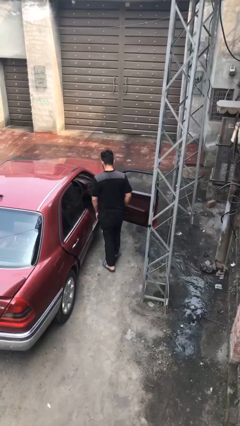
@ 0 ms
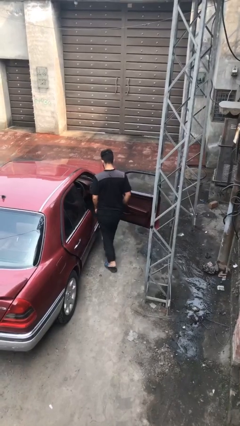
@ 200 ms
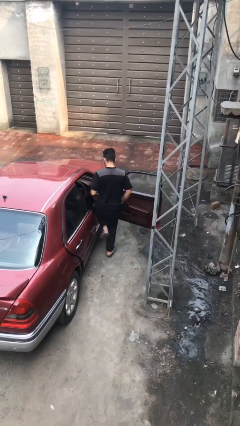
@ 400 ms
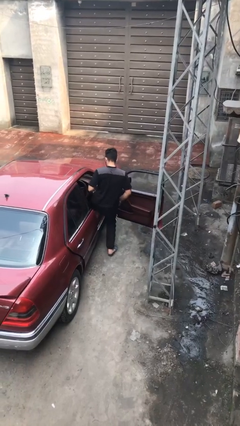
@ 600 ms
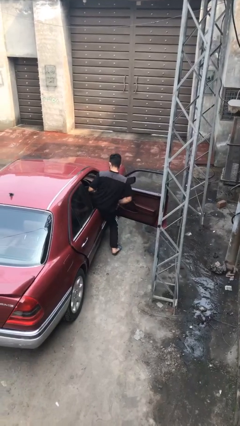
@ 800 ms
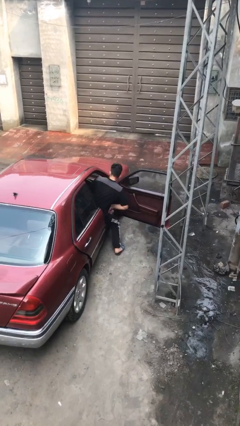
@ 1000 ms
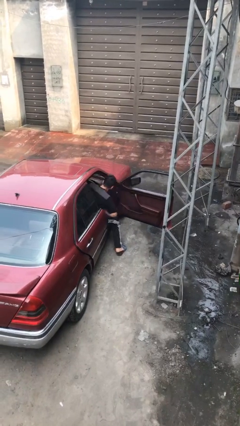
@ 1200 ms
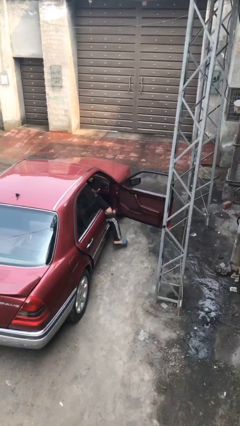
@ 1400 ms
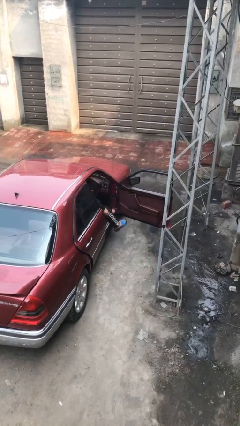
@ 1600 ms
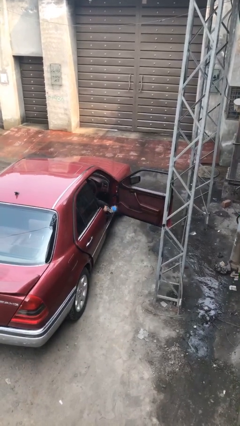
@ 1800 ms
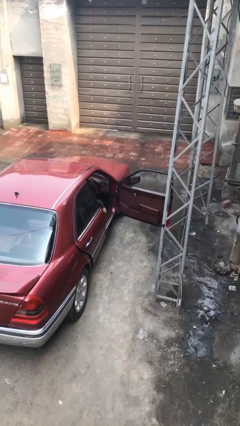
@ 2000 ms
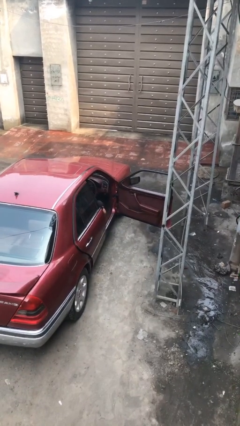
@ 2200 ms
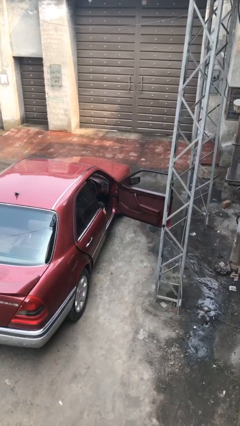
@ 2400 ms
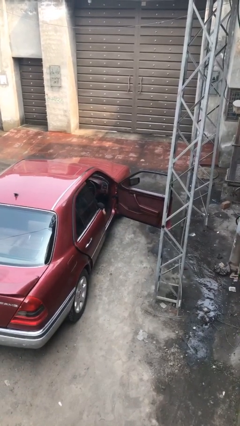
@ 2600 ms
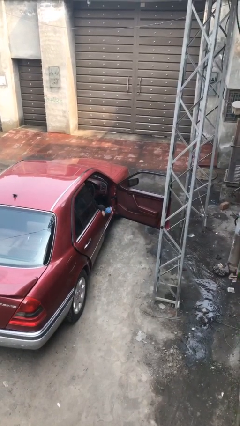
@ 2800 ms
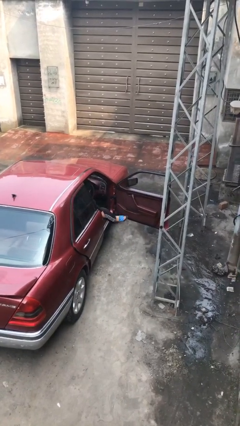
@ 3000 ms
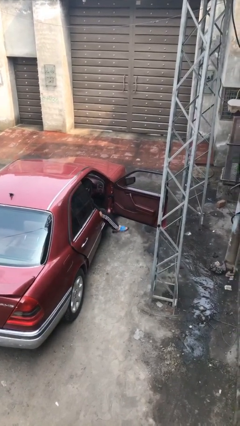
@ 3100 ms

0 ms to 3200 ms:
person enters car

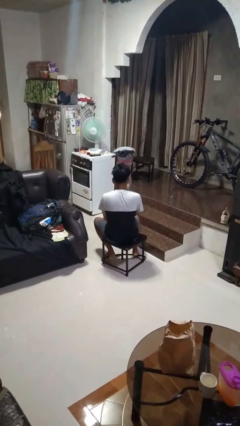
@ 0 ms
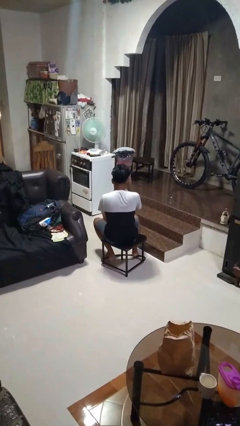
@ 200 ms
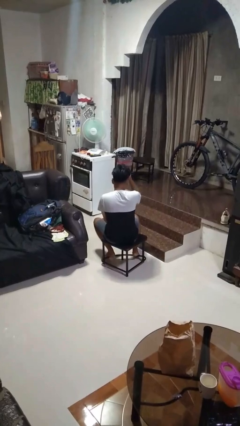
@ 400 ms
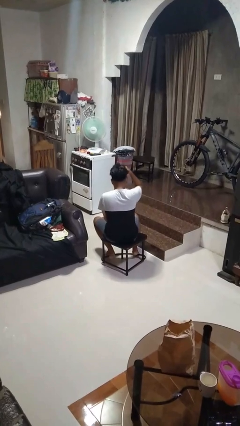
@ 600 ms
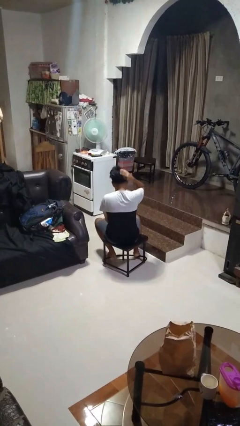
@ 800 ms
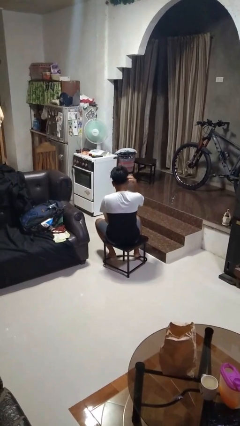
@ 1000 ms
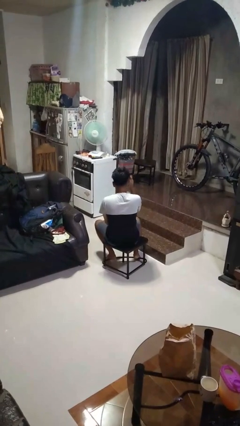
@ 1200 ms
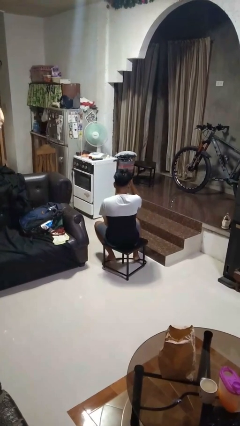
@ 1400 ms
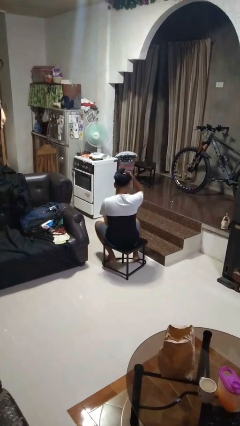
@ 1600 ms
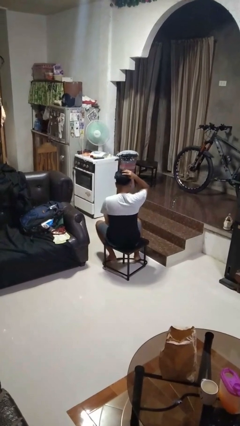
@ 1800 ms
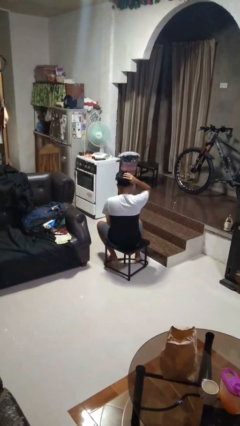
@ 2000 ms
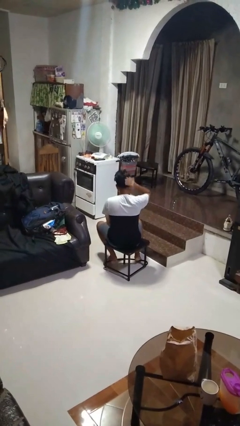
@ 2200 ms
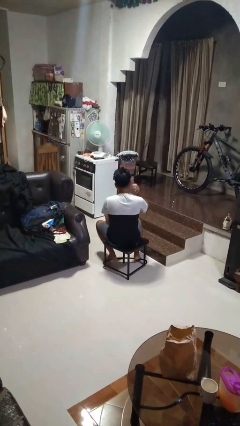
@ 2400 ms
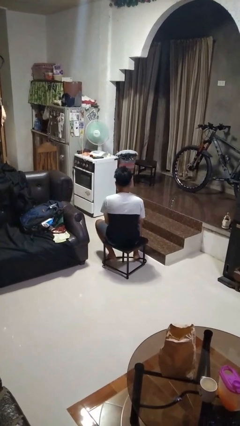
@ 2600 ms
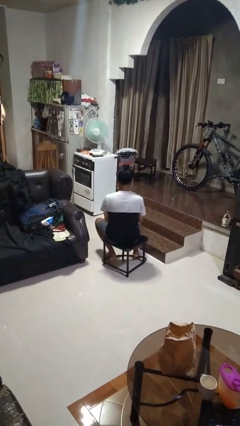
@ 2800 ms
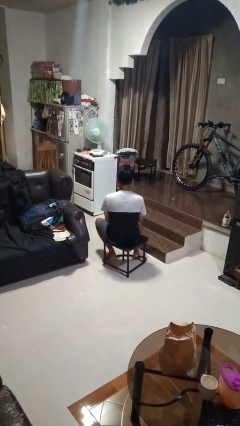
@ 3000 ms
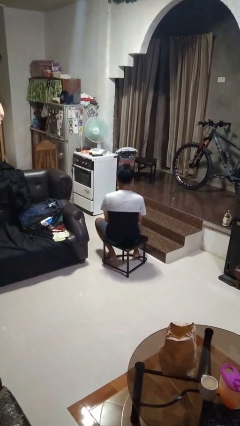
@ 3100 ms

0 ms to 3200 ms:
person strokes hair

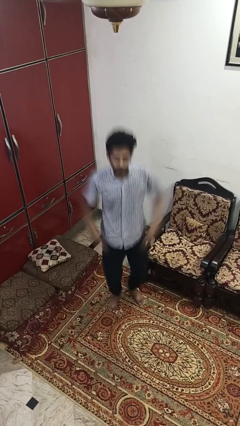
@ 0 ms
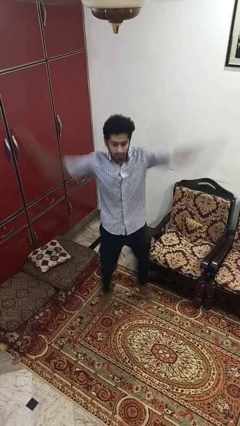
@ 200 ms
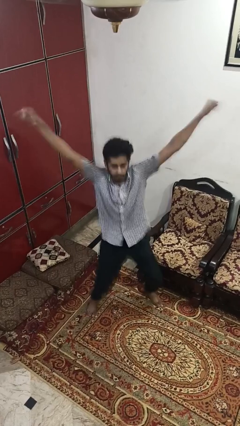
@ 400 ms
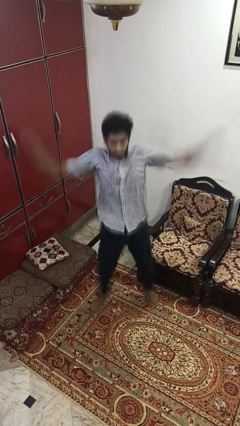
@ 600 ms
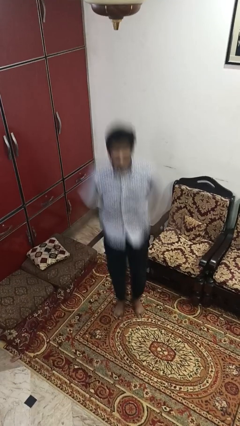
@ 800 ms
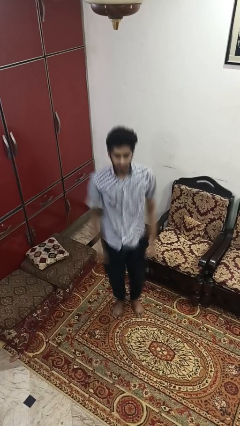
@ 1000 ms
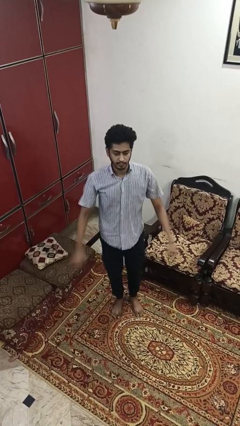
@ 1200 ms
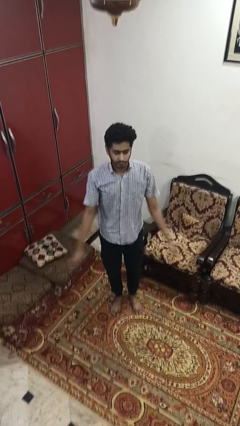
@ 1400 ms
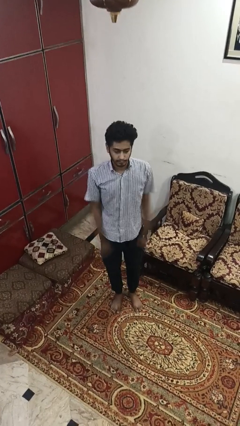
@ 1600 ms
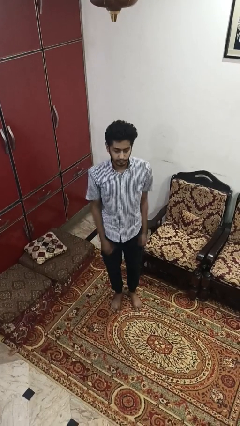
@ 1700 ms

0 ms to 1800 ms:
person exercises with jumping jacks

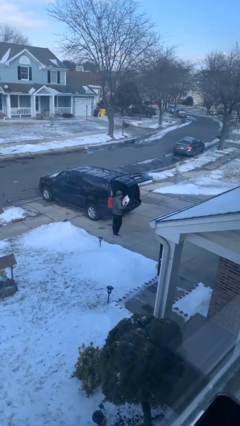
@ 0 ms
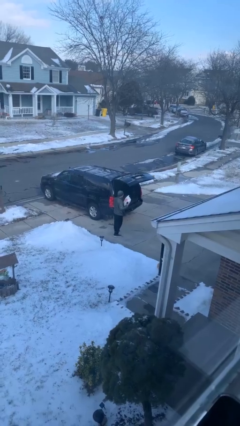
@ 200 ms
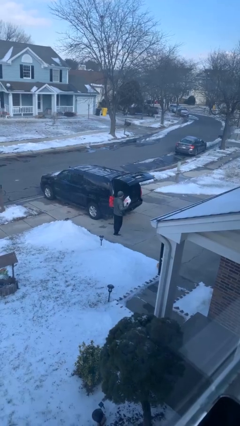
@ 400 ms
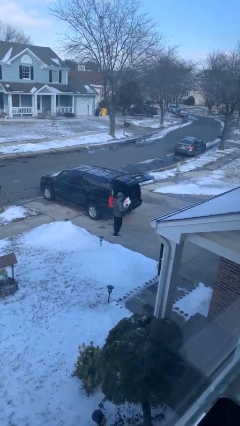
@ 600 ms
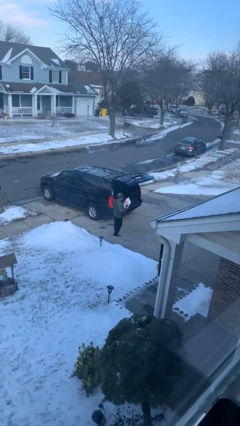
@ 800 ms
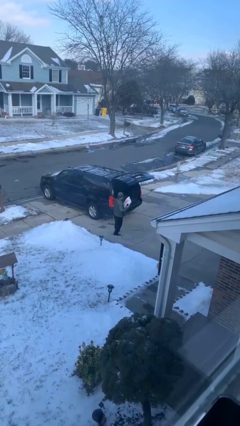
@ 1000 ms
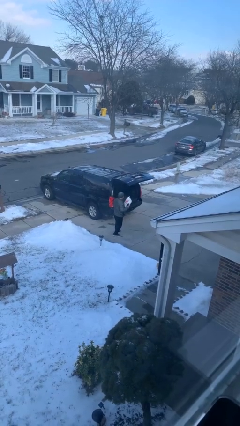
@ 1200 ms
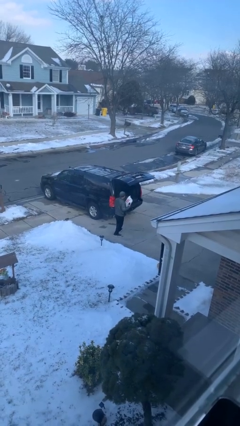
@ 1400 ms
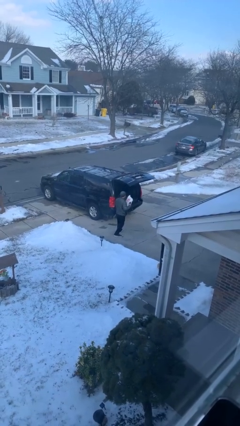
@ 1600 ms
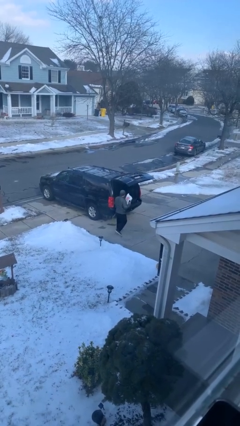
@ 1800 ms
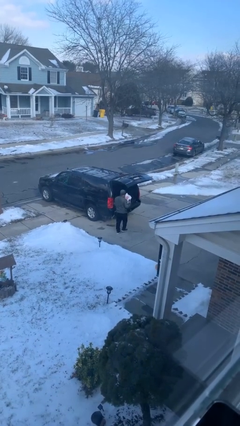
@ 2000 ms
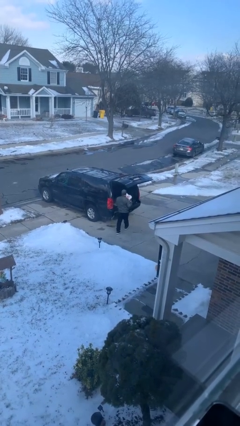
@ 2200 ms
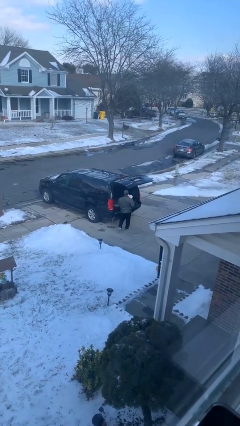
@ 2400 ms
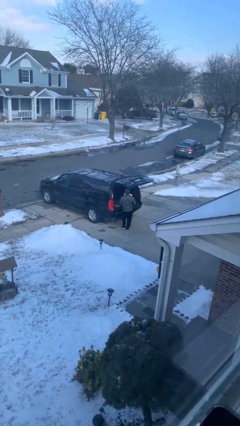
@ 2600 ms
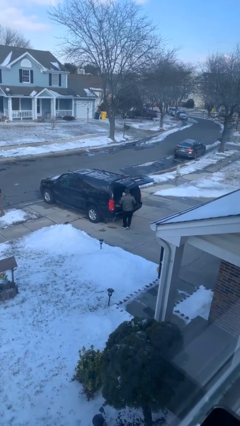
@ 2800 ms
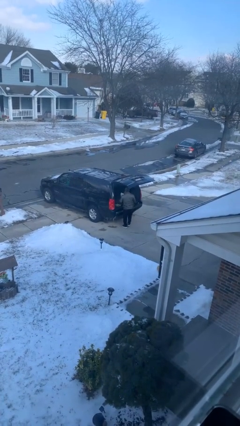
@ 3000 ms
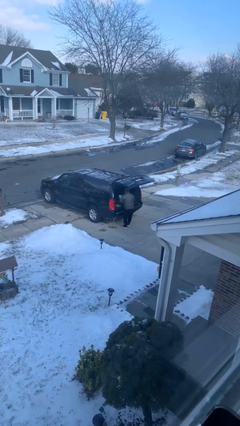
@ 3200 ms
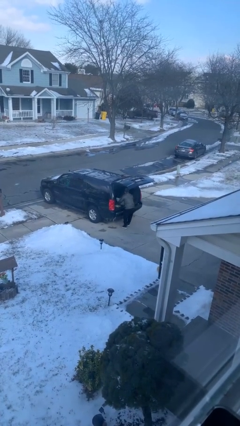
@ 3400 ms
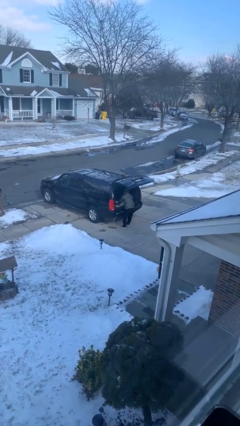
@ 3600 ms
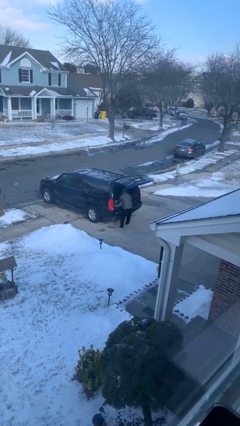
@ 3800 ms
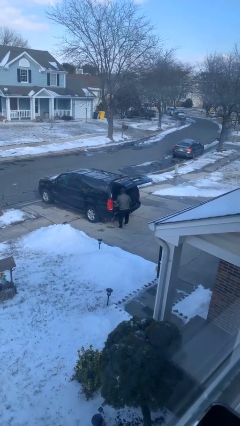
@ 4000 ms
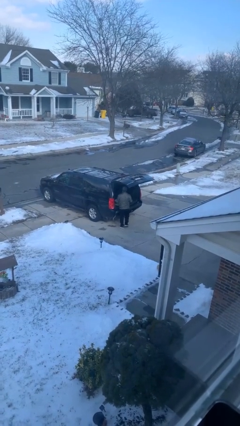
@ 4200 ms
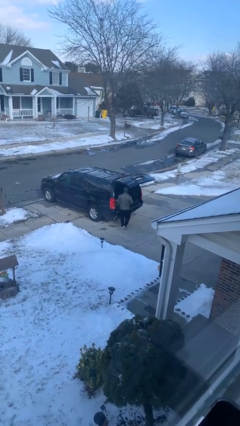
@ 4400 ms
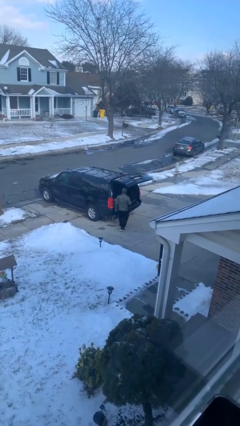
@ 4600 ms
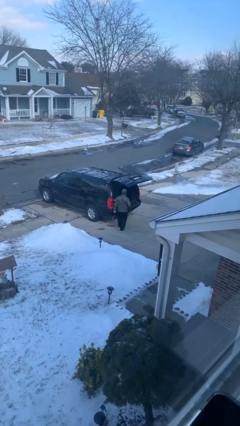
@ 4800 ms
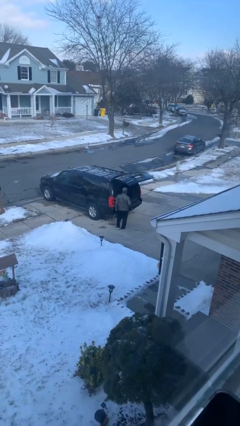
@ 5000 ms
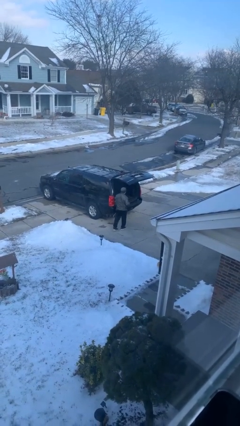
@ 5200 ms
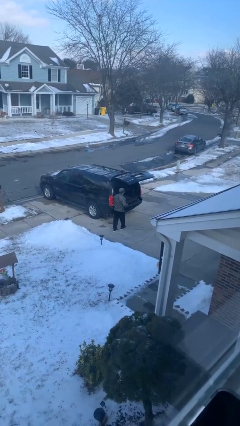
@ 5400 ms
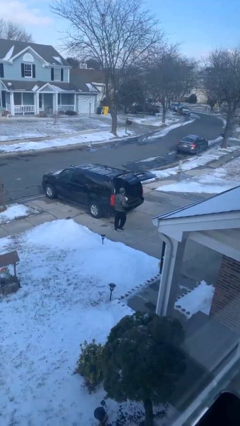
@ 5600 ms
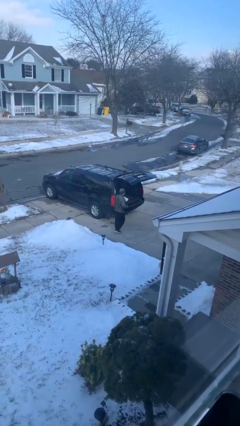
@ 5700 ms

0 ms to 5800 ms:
person loads car

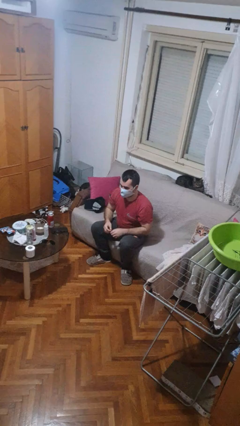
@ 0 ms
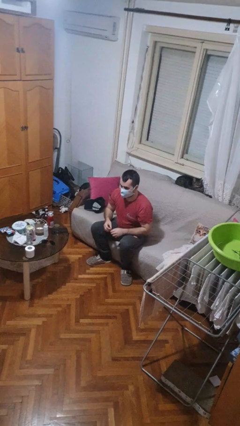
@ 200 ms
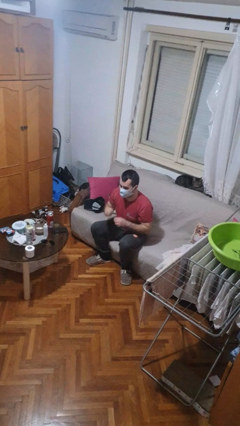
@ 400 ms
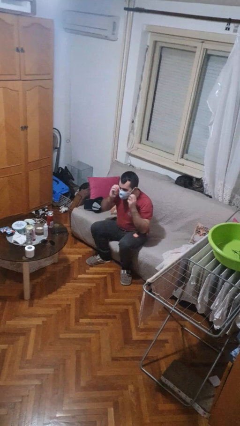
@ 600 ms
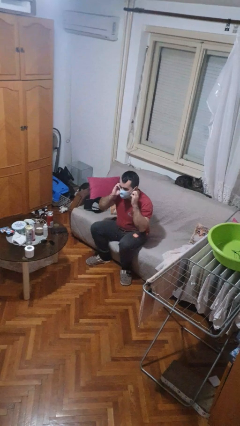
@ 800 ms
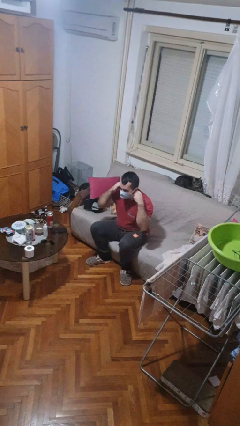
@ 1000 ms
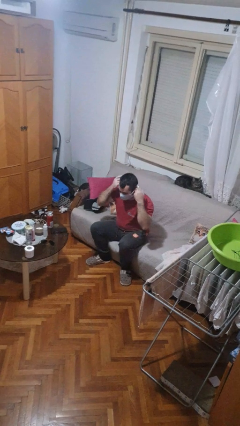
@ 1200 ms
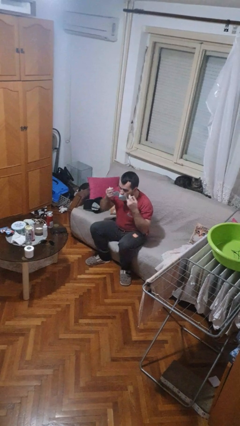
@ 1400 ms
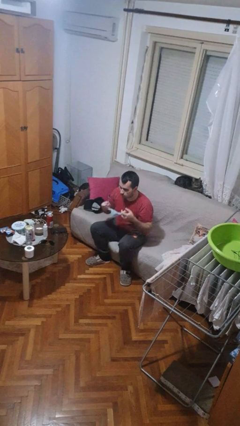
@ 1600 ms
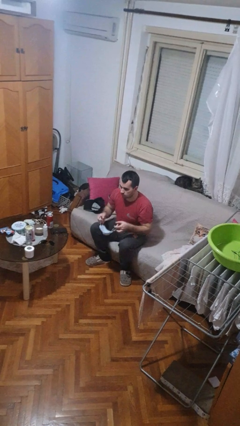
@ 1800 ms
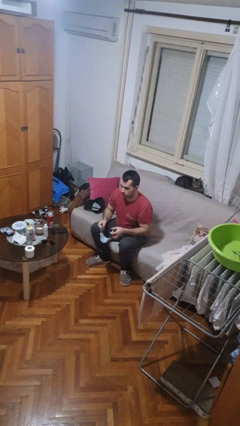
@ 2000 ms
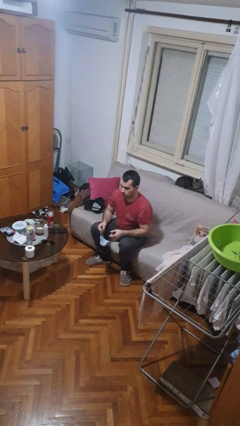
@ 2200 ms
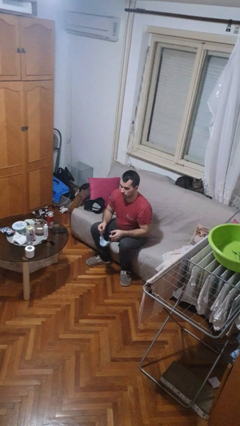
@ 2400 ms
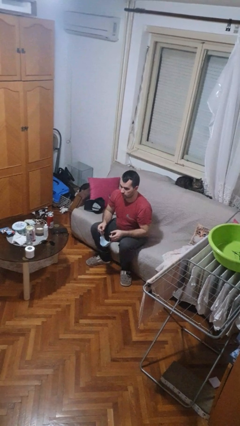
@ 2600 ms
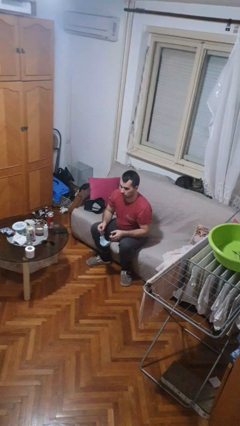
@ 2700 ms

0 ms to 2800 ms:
person takes off facemask

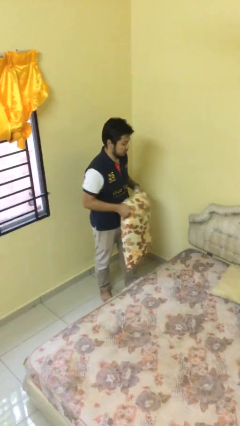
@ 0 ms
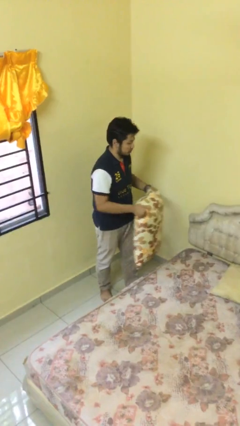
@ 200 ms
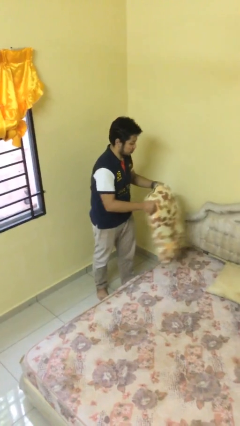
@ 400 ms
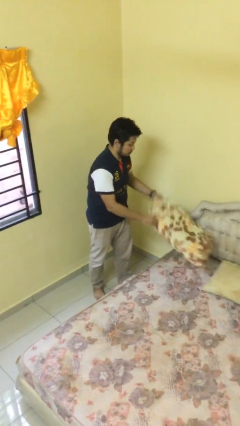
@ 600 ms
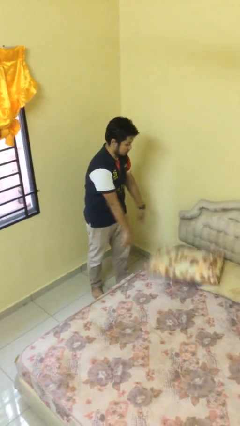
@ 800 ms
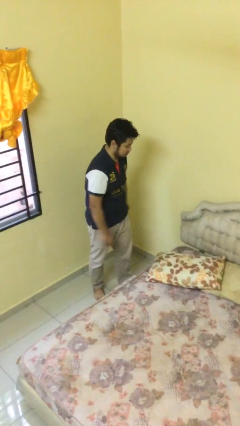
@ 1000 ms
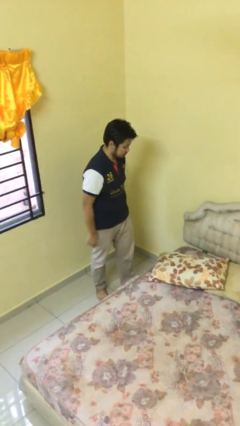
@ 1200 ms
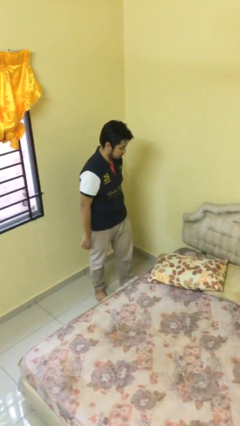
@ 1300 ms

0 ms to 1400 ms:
person puts down object on bed
